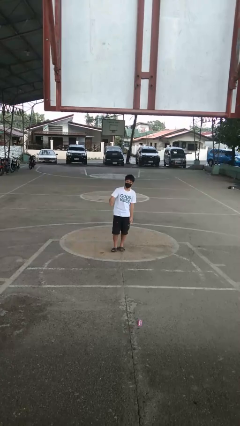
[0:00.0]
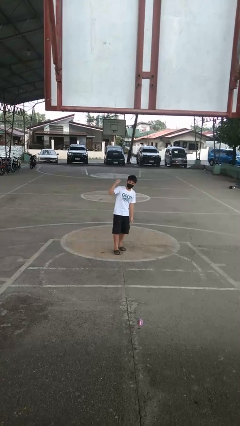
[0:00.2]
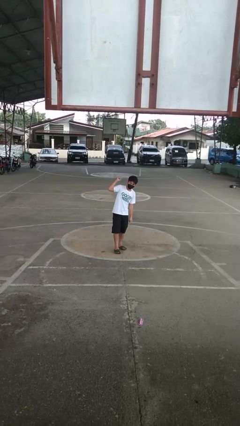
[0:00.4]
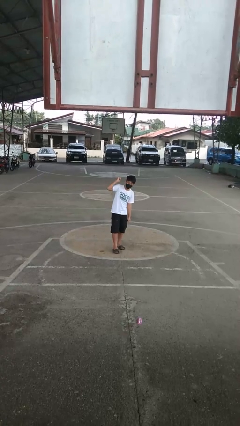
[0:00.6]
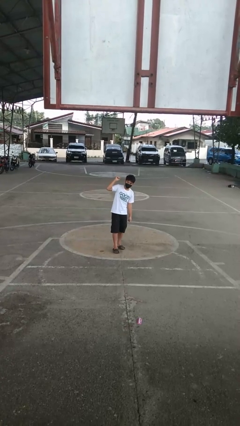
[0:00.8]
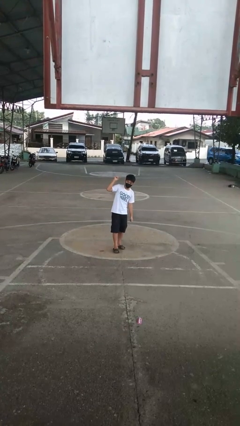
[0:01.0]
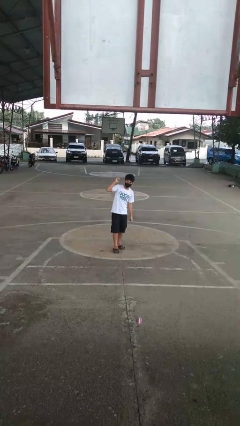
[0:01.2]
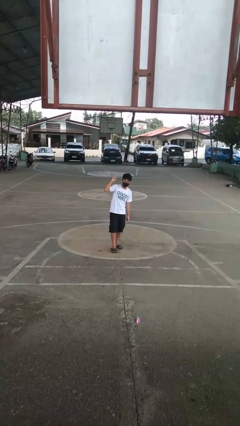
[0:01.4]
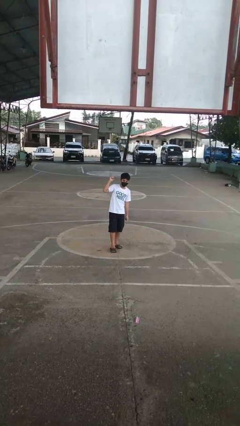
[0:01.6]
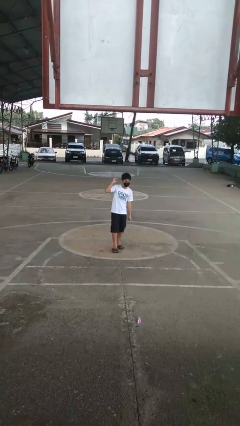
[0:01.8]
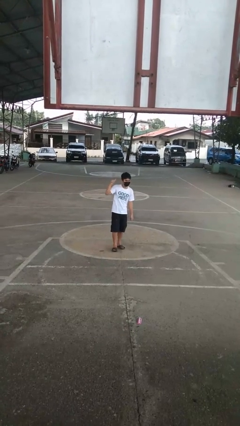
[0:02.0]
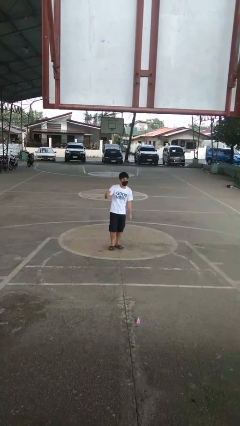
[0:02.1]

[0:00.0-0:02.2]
person gestures behind me

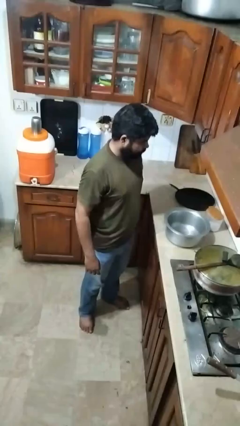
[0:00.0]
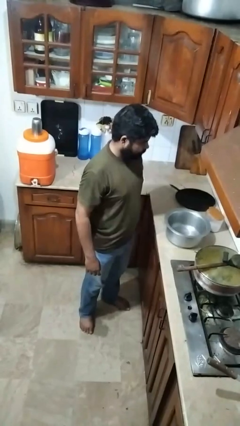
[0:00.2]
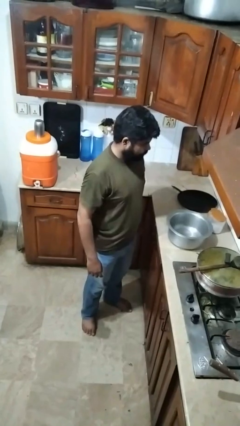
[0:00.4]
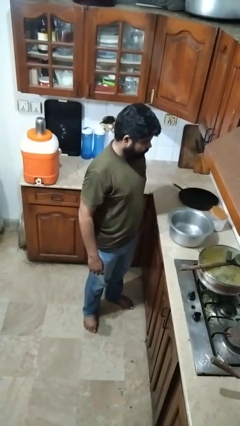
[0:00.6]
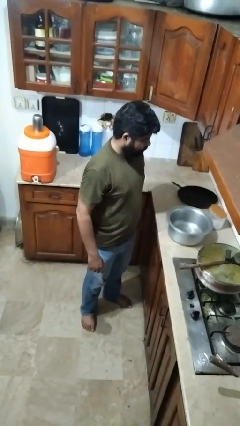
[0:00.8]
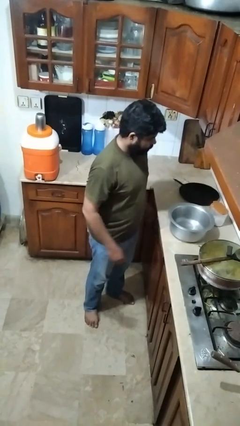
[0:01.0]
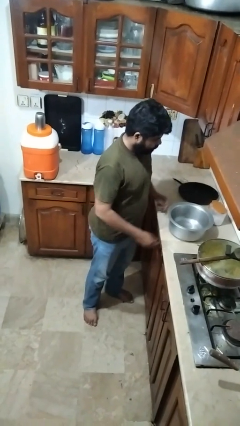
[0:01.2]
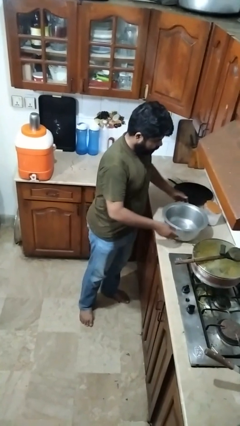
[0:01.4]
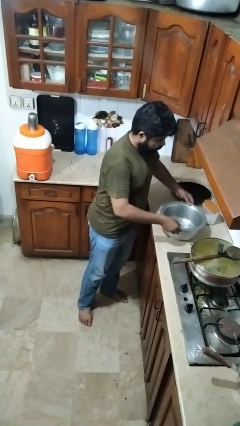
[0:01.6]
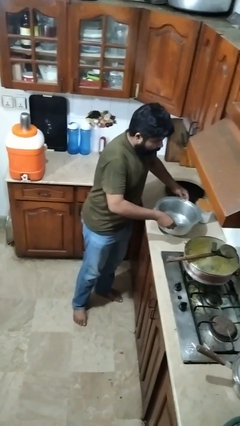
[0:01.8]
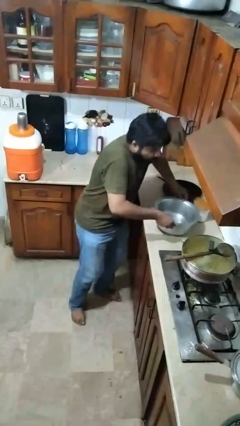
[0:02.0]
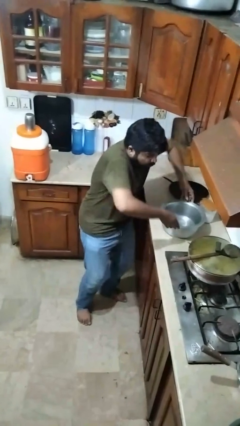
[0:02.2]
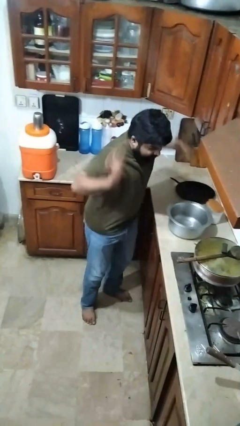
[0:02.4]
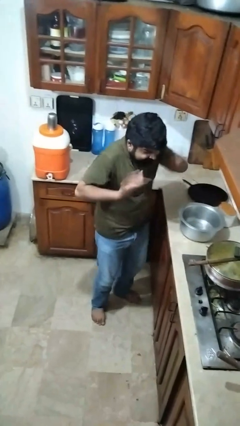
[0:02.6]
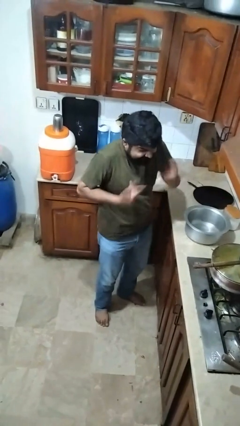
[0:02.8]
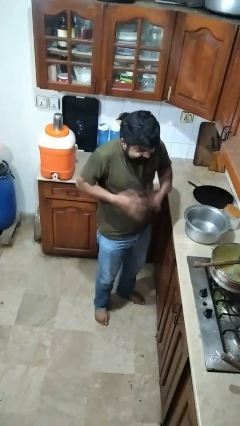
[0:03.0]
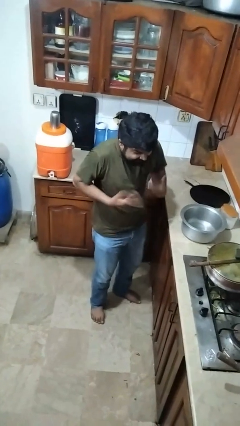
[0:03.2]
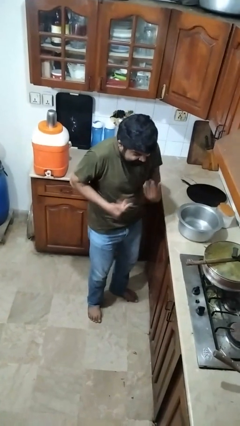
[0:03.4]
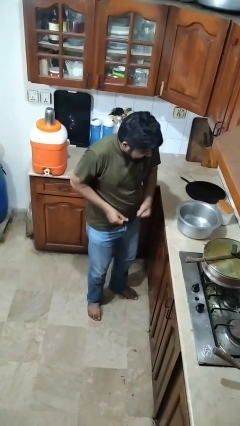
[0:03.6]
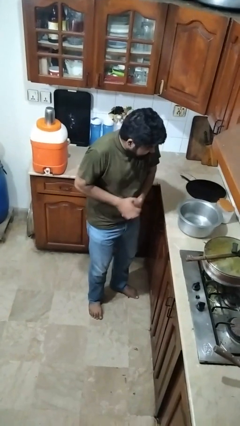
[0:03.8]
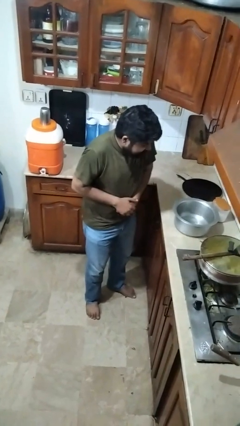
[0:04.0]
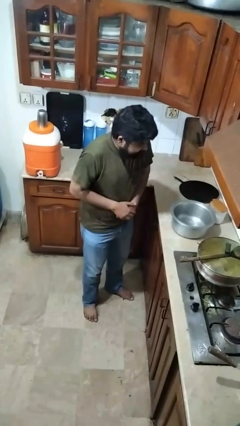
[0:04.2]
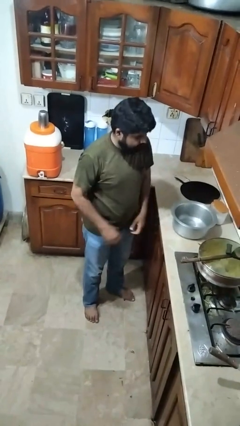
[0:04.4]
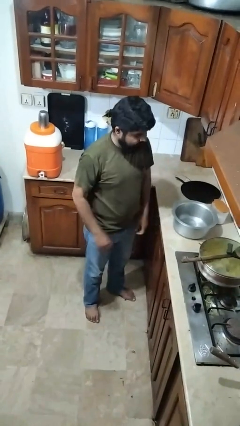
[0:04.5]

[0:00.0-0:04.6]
person burns hand

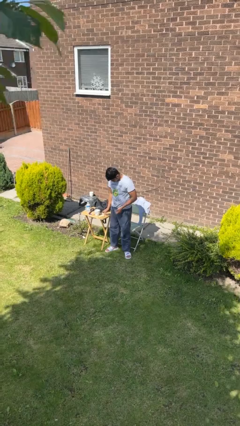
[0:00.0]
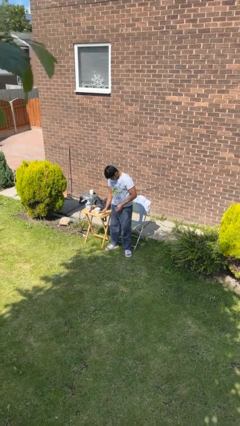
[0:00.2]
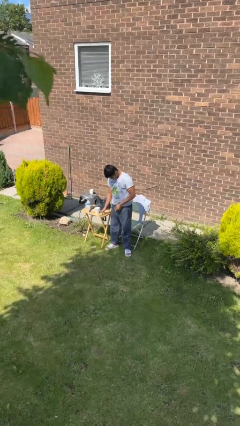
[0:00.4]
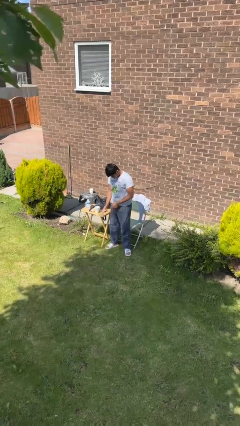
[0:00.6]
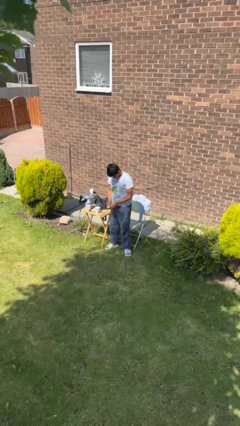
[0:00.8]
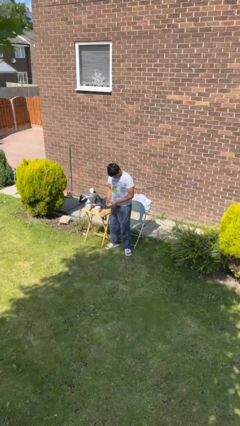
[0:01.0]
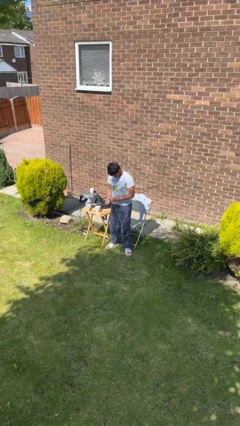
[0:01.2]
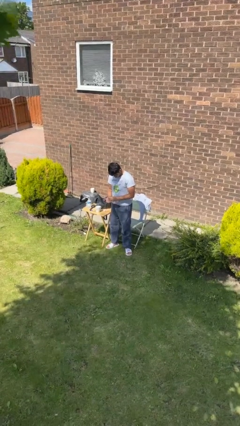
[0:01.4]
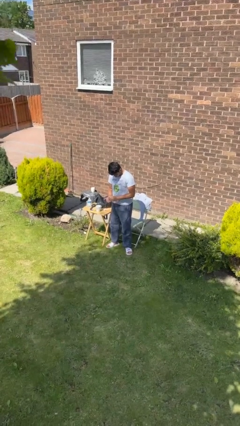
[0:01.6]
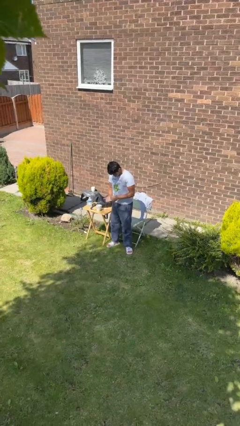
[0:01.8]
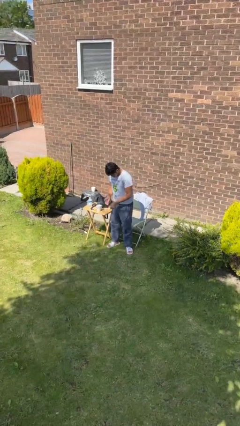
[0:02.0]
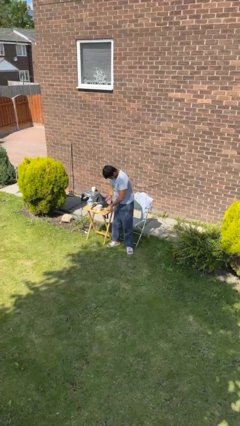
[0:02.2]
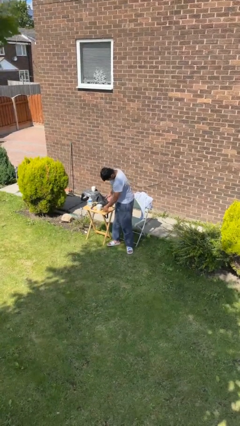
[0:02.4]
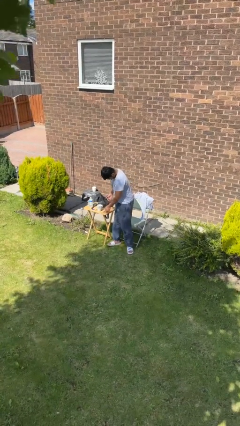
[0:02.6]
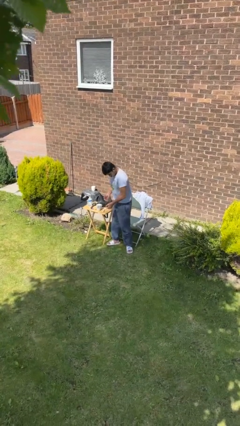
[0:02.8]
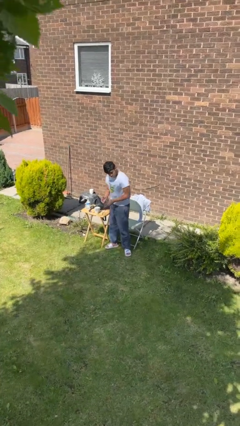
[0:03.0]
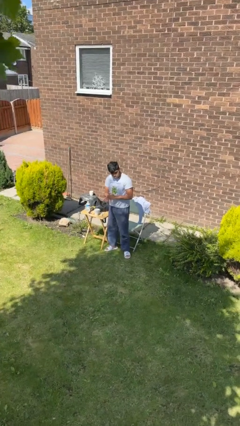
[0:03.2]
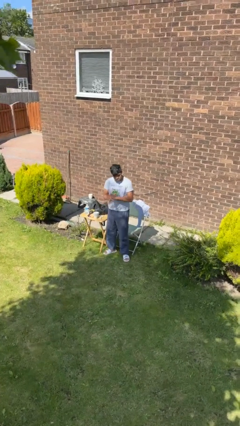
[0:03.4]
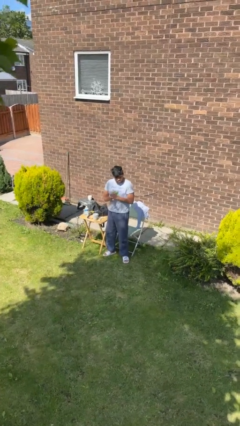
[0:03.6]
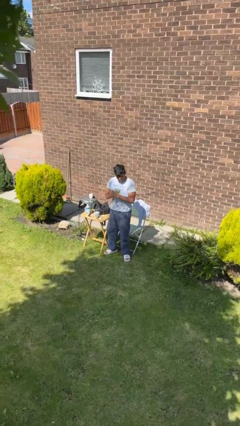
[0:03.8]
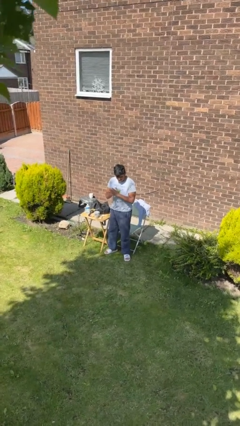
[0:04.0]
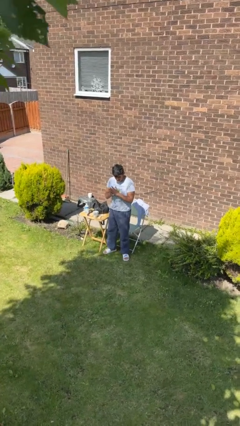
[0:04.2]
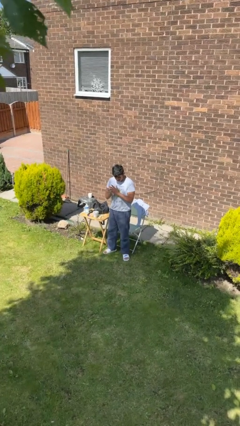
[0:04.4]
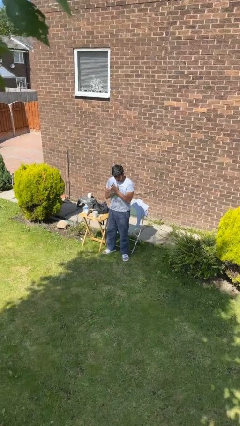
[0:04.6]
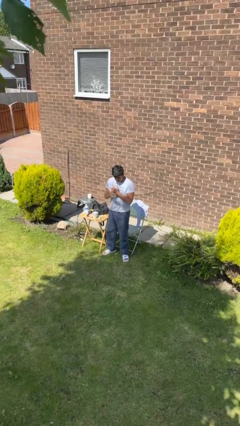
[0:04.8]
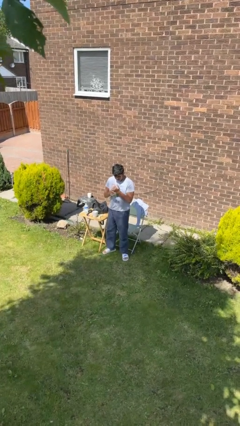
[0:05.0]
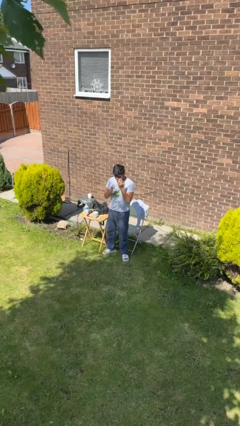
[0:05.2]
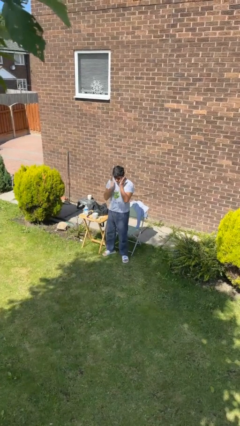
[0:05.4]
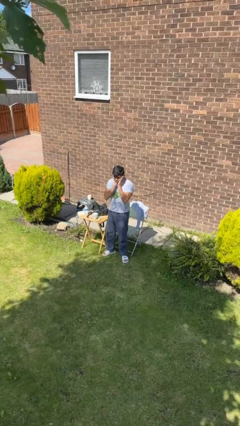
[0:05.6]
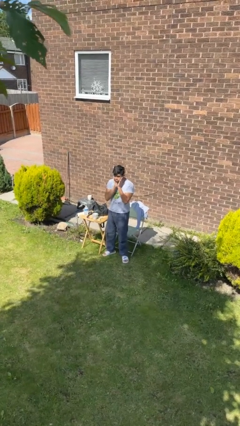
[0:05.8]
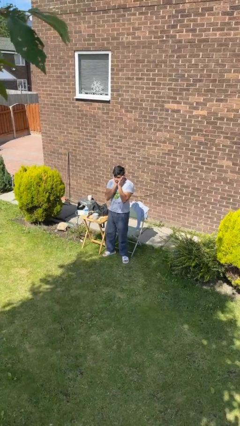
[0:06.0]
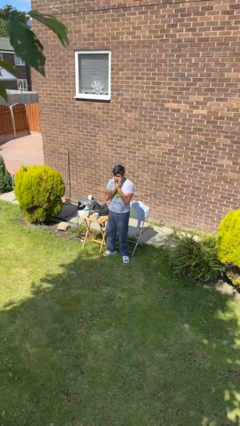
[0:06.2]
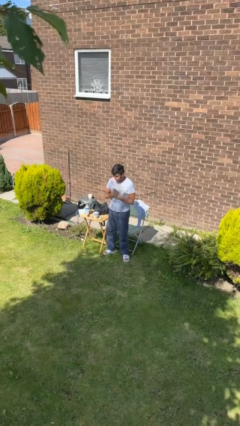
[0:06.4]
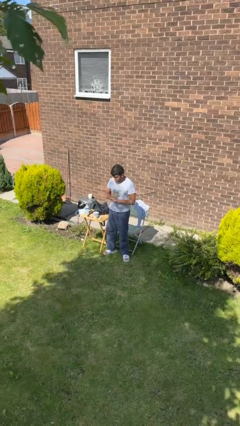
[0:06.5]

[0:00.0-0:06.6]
person applies facial moisturizer

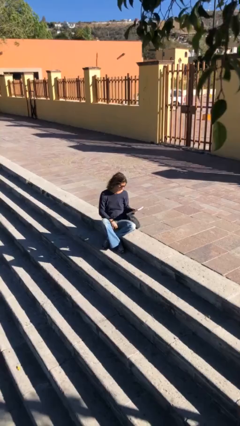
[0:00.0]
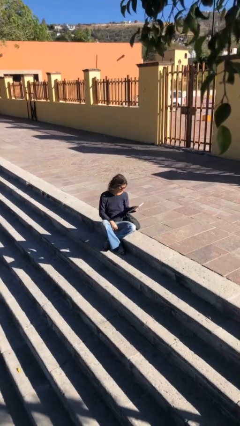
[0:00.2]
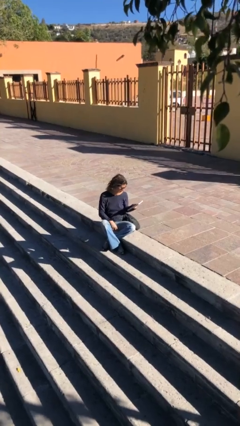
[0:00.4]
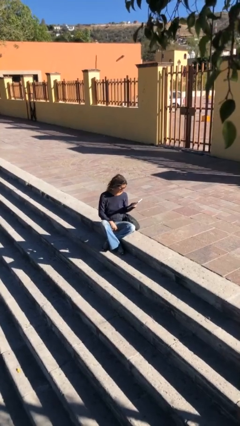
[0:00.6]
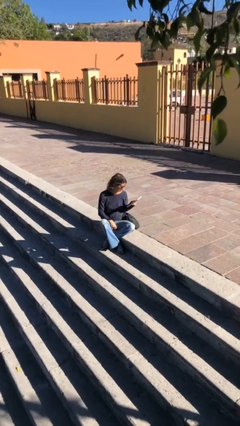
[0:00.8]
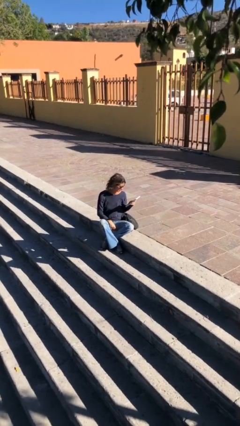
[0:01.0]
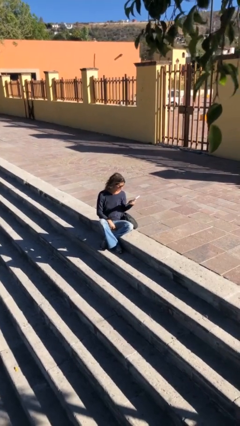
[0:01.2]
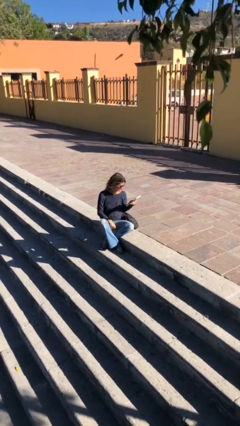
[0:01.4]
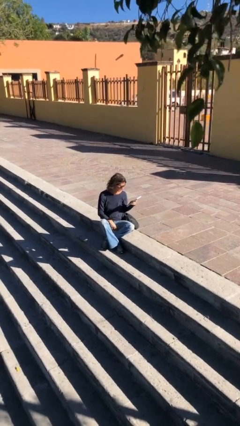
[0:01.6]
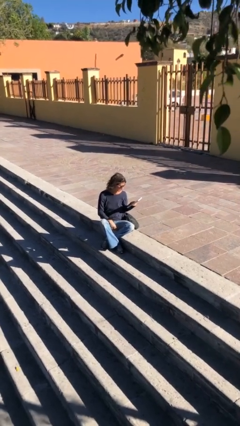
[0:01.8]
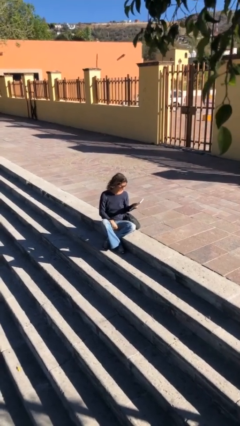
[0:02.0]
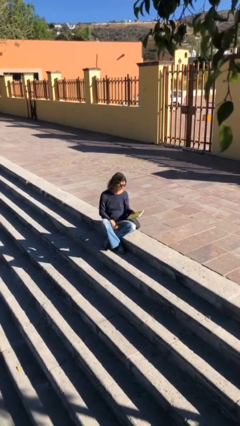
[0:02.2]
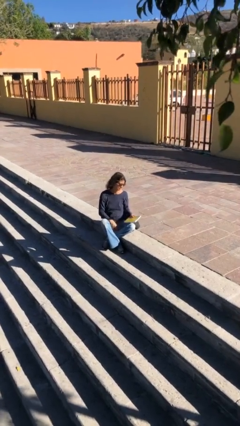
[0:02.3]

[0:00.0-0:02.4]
person reads document

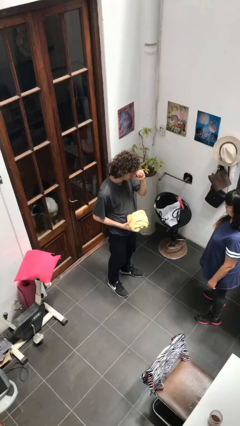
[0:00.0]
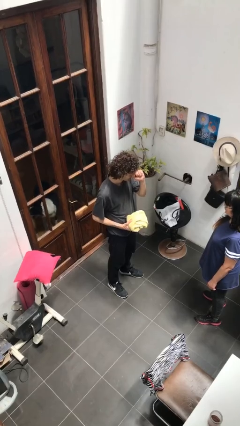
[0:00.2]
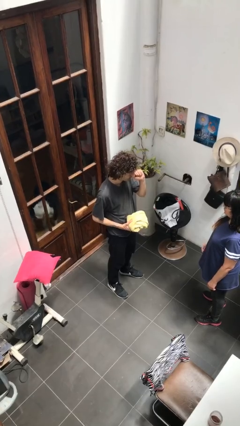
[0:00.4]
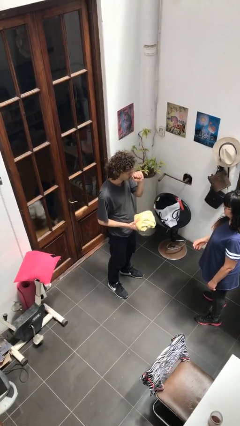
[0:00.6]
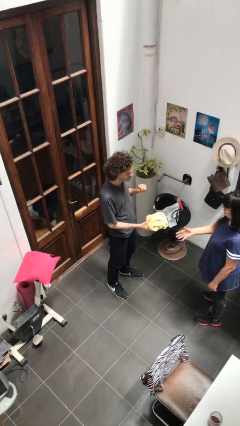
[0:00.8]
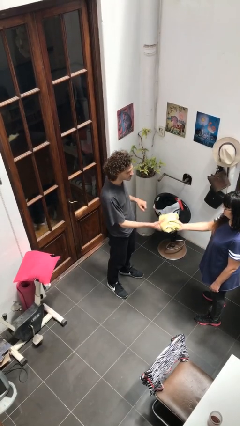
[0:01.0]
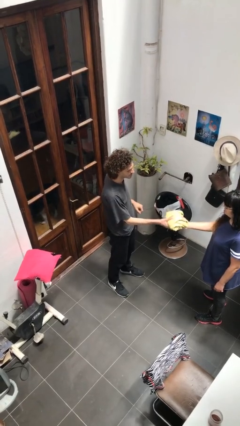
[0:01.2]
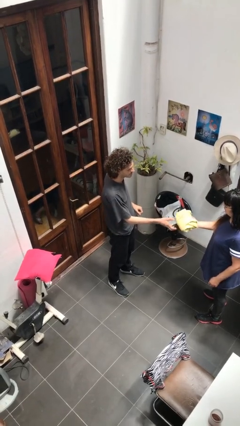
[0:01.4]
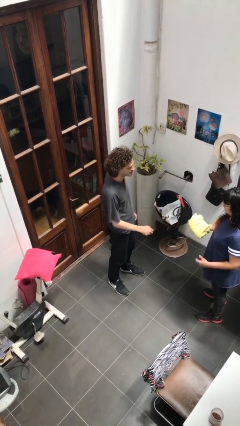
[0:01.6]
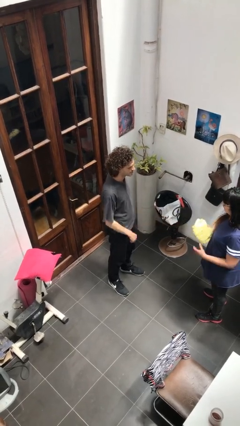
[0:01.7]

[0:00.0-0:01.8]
person transfers object to person
